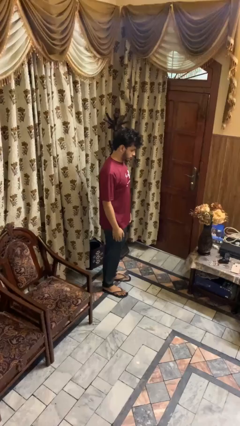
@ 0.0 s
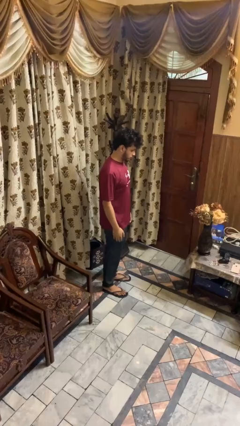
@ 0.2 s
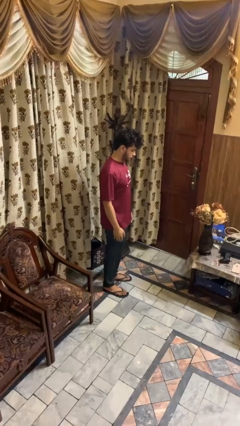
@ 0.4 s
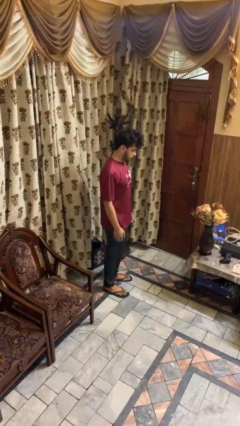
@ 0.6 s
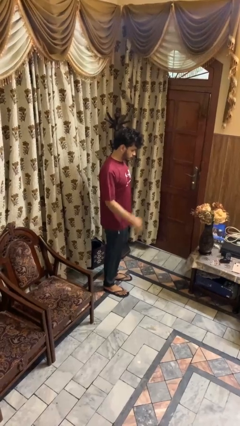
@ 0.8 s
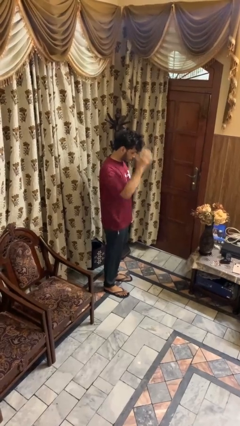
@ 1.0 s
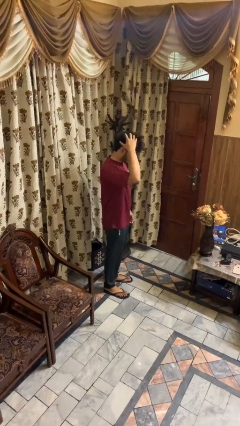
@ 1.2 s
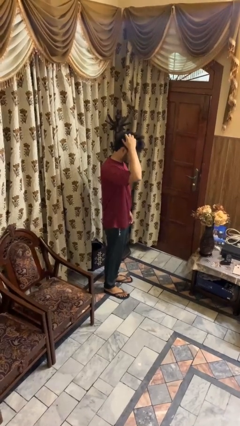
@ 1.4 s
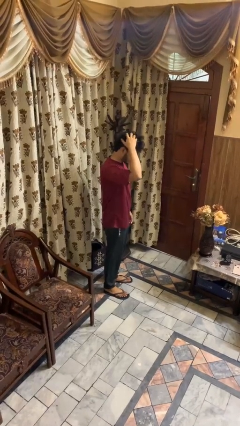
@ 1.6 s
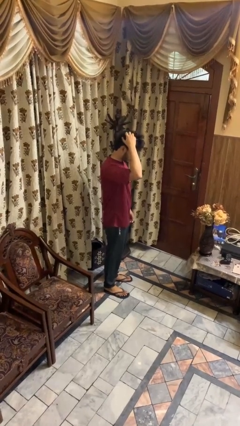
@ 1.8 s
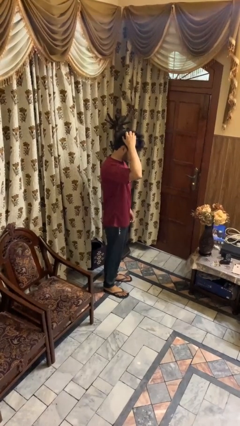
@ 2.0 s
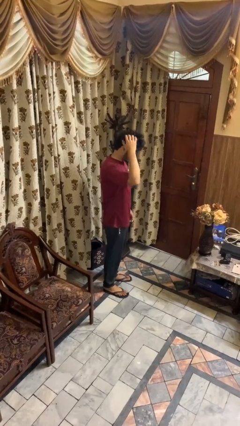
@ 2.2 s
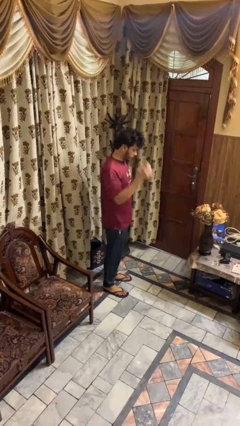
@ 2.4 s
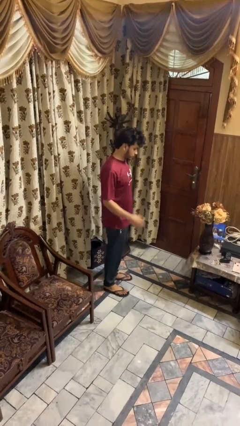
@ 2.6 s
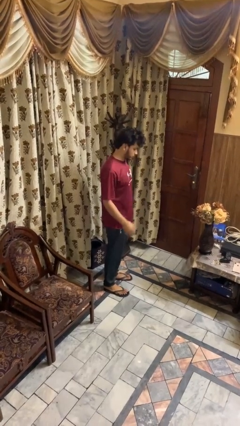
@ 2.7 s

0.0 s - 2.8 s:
person scratches face

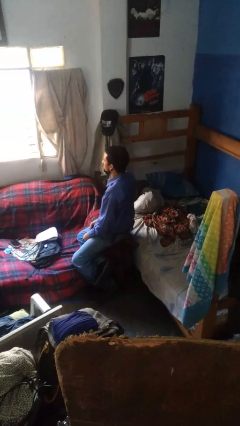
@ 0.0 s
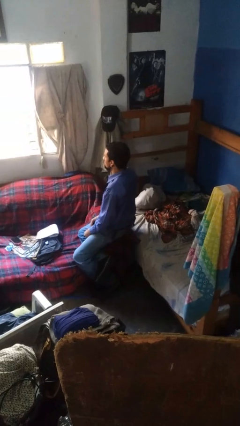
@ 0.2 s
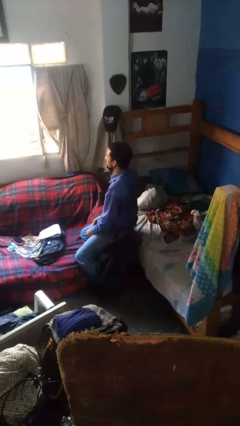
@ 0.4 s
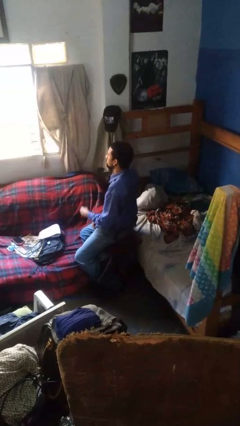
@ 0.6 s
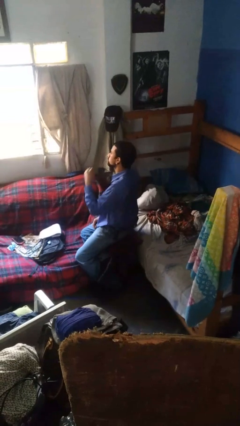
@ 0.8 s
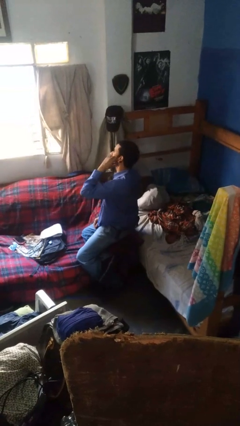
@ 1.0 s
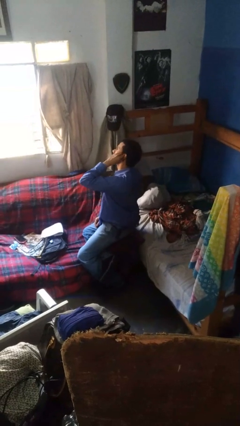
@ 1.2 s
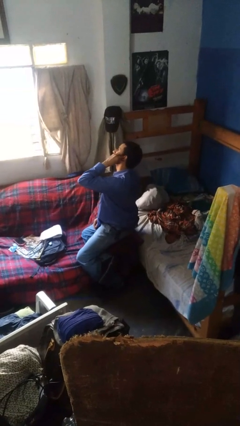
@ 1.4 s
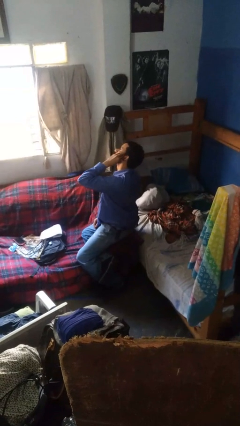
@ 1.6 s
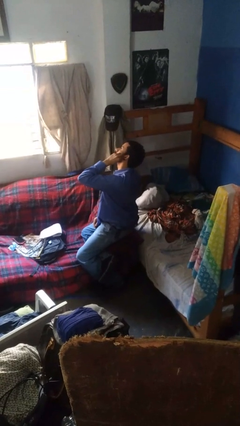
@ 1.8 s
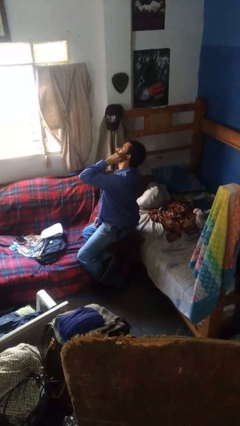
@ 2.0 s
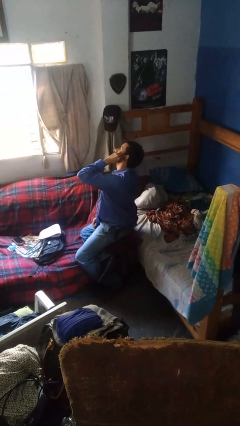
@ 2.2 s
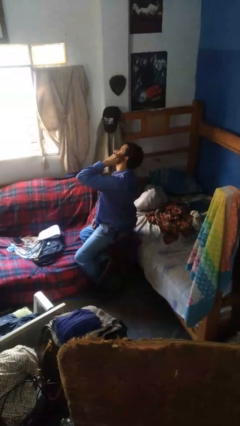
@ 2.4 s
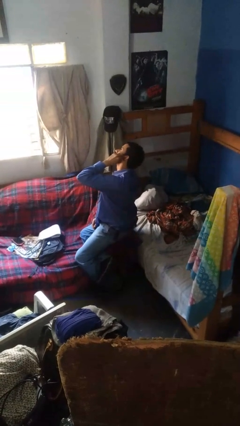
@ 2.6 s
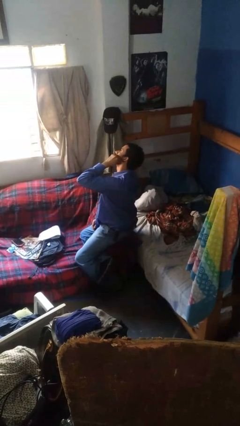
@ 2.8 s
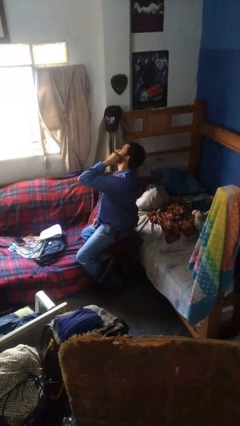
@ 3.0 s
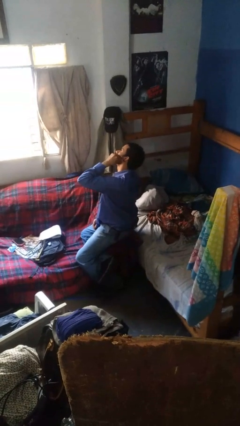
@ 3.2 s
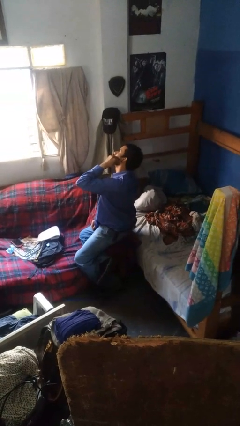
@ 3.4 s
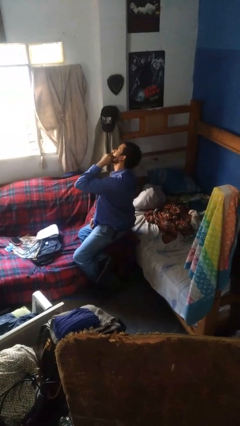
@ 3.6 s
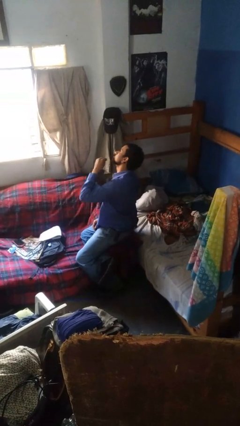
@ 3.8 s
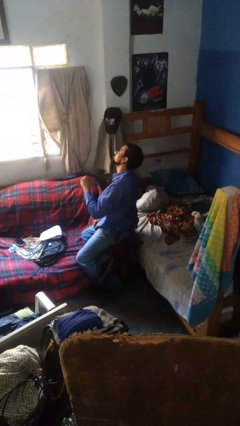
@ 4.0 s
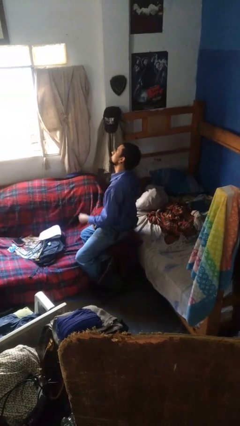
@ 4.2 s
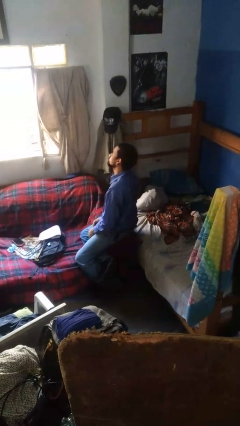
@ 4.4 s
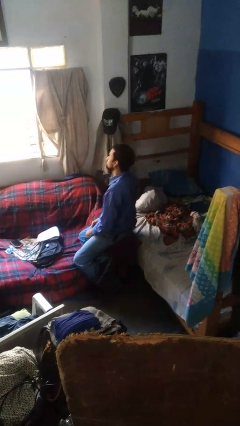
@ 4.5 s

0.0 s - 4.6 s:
person touches earlobe

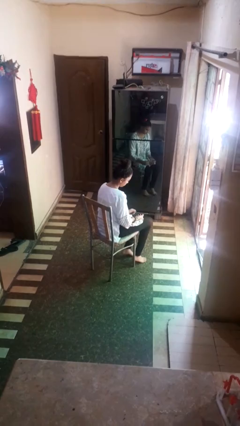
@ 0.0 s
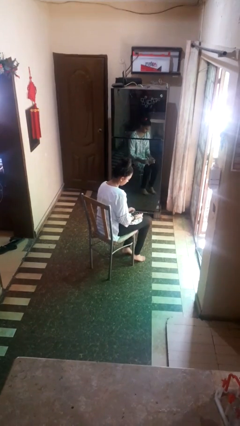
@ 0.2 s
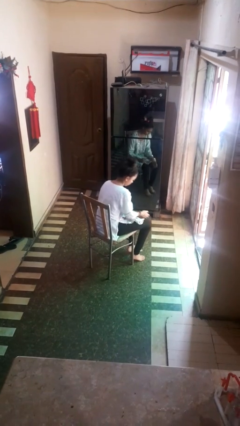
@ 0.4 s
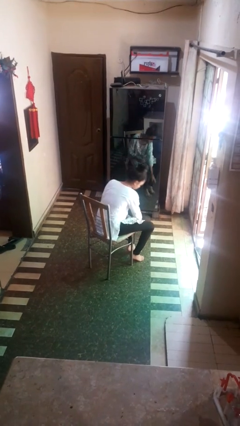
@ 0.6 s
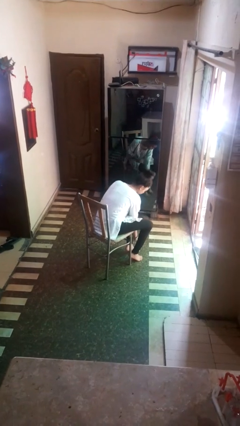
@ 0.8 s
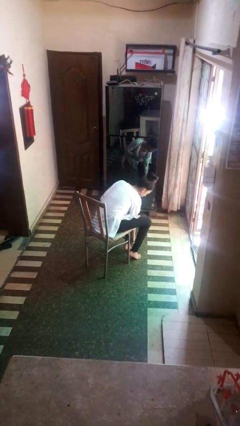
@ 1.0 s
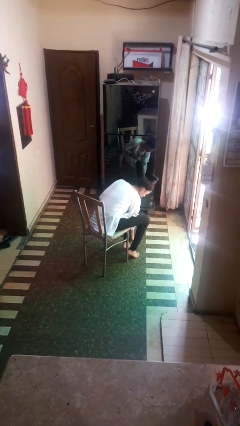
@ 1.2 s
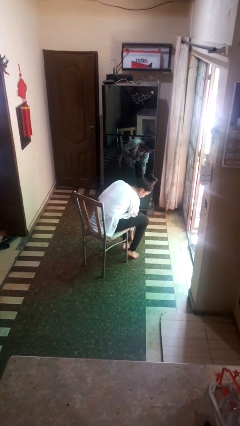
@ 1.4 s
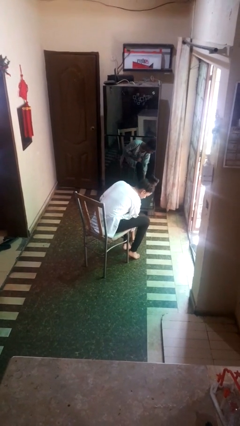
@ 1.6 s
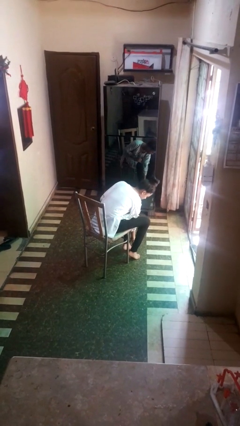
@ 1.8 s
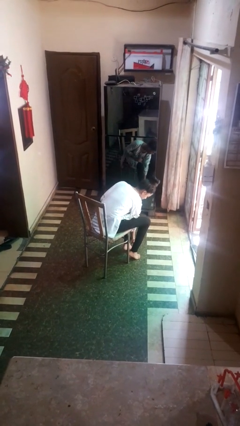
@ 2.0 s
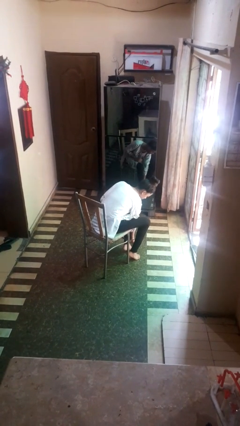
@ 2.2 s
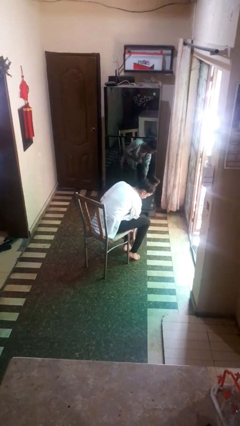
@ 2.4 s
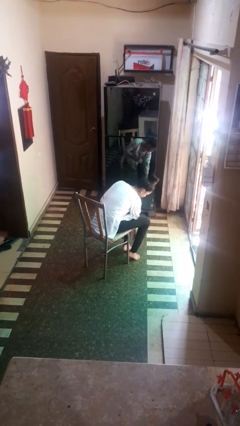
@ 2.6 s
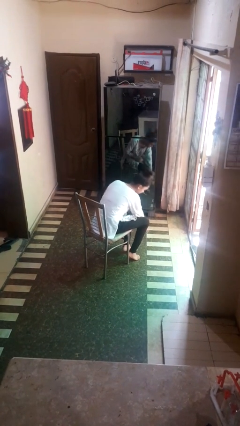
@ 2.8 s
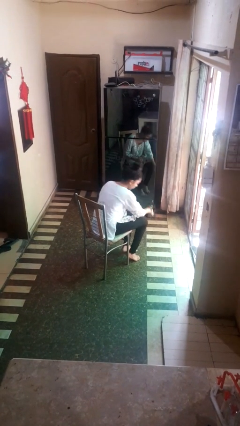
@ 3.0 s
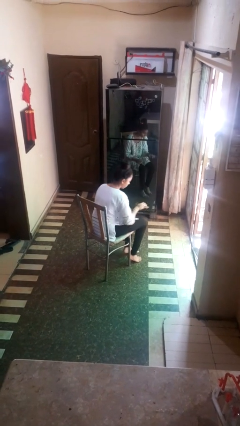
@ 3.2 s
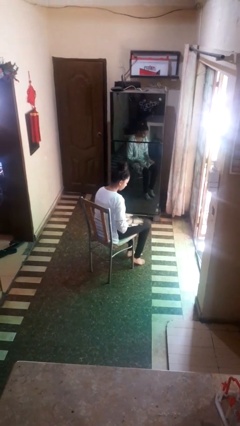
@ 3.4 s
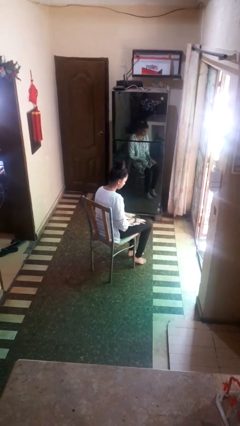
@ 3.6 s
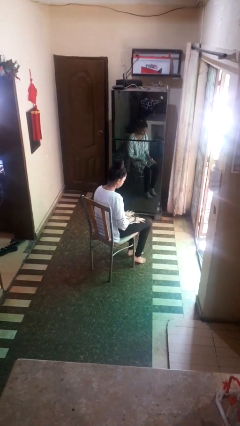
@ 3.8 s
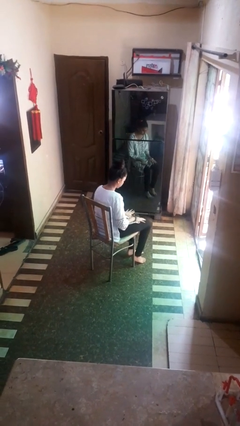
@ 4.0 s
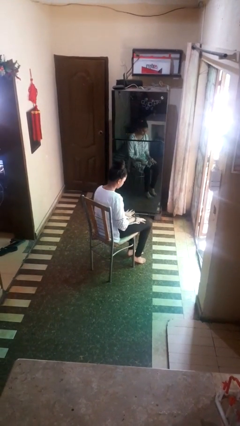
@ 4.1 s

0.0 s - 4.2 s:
person rubs foot

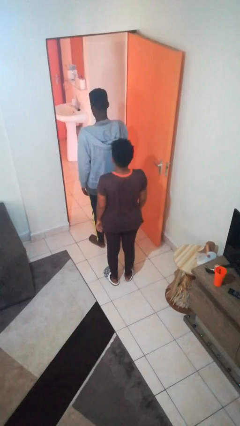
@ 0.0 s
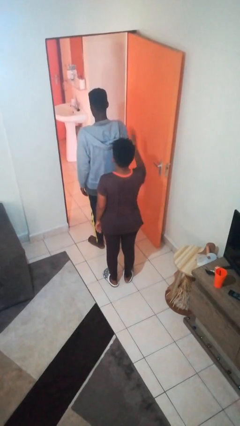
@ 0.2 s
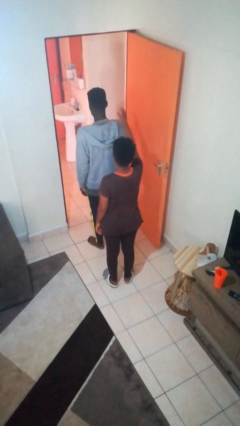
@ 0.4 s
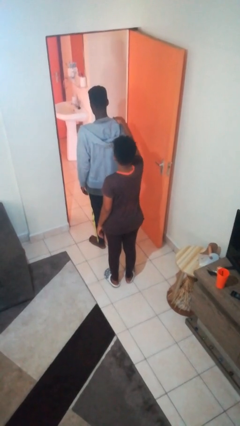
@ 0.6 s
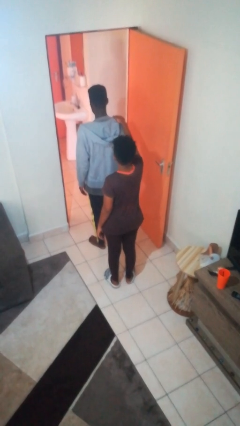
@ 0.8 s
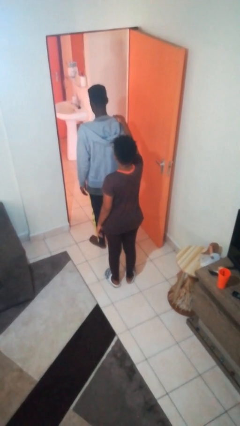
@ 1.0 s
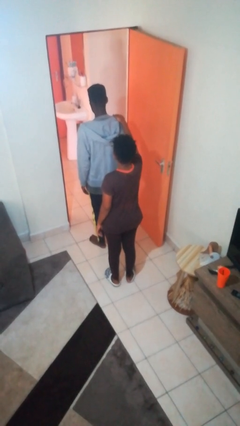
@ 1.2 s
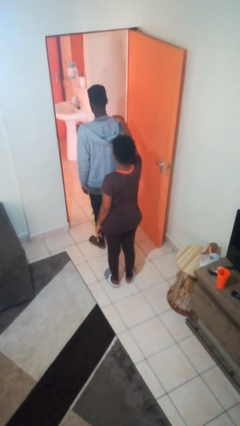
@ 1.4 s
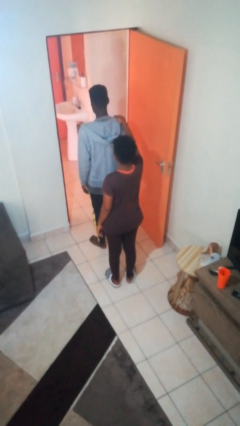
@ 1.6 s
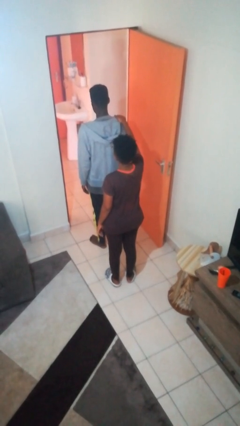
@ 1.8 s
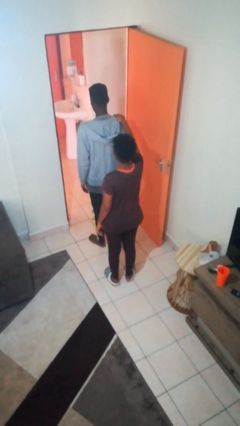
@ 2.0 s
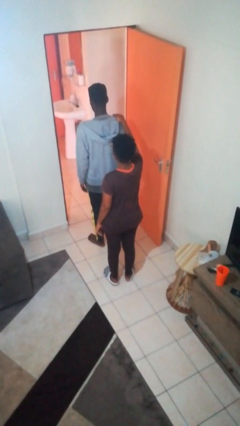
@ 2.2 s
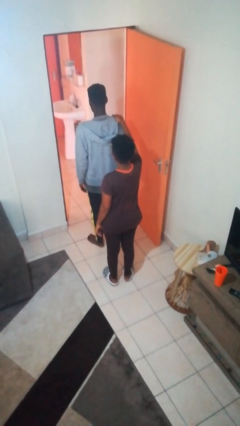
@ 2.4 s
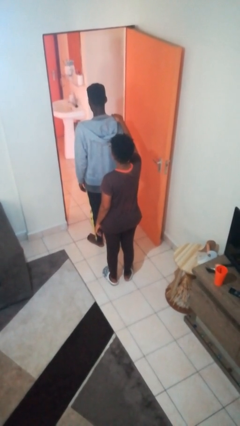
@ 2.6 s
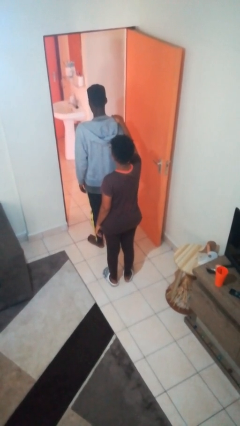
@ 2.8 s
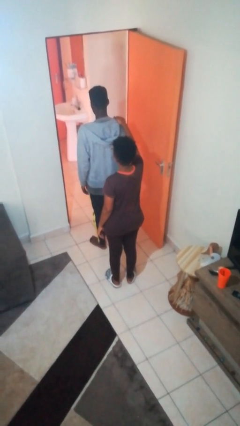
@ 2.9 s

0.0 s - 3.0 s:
person grabs person by shoulder

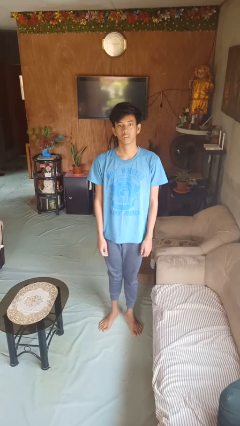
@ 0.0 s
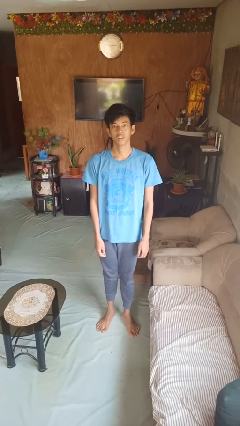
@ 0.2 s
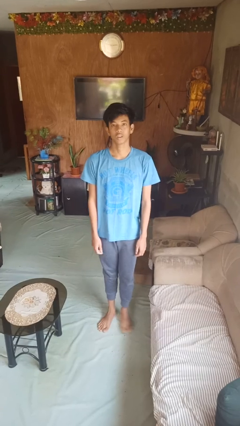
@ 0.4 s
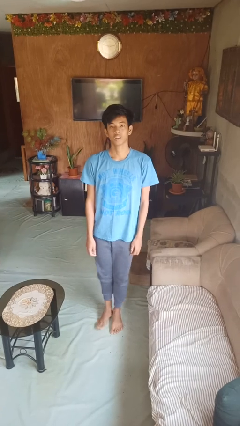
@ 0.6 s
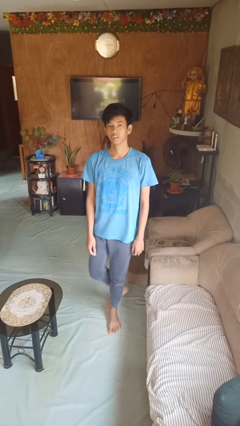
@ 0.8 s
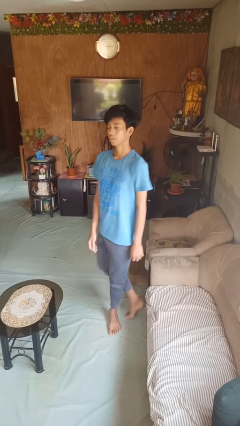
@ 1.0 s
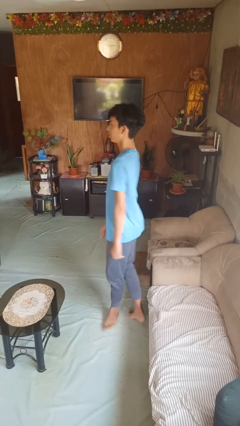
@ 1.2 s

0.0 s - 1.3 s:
person twirls

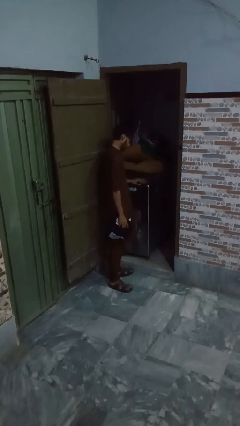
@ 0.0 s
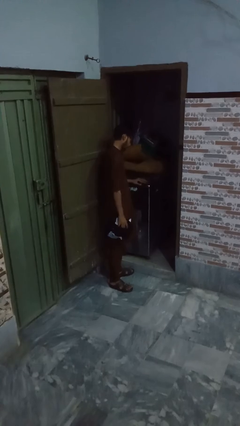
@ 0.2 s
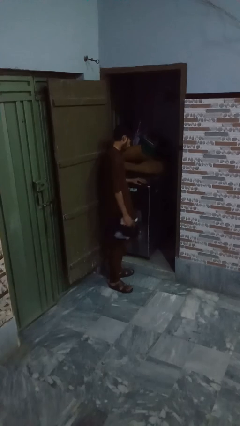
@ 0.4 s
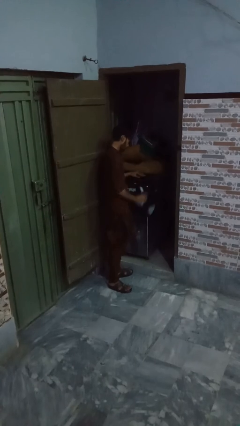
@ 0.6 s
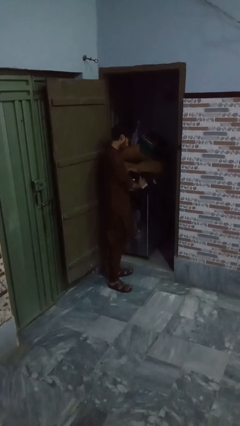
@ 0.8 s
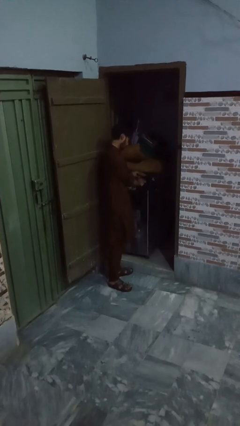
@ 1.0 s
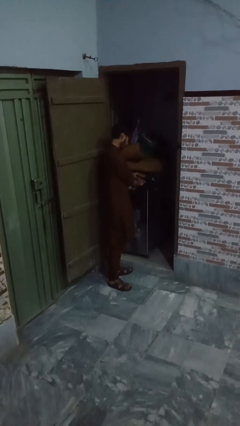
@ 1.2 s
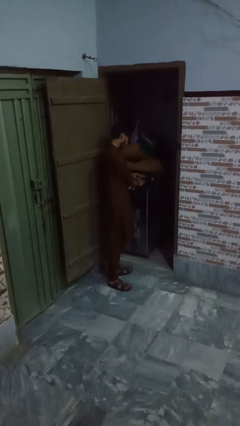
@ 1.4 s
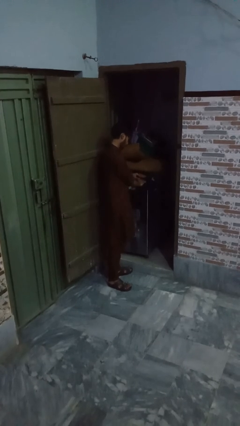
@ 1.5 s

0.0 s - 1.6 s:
person loads dryer
